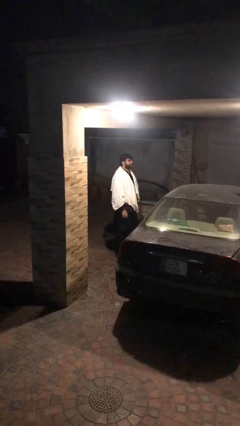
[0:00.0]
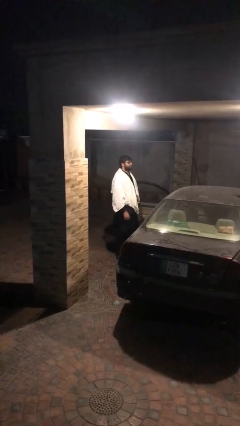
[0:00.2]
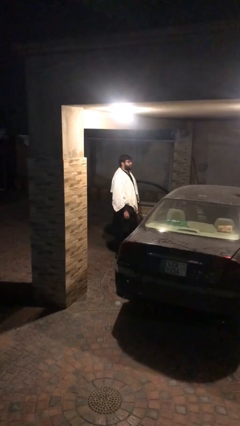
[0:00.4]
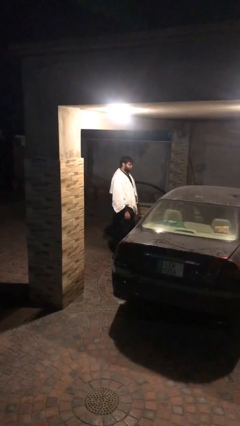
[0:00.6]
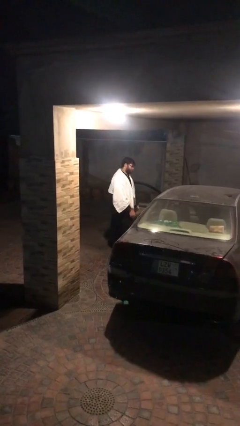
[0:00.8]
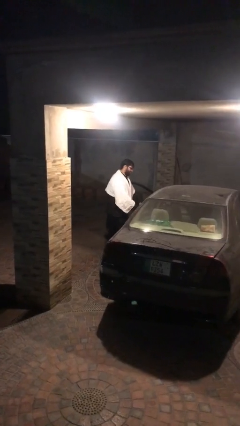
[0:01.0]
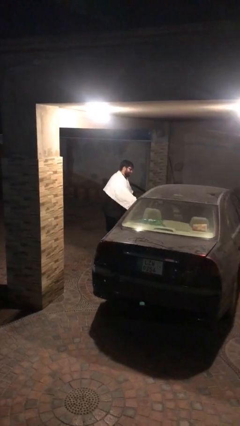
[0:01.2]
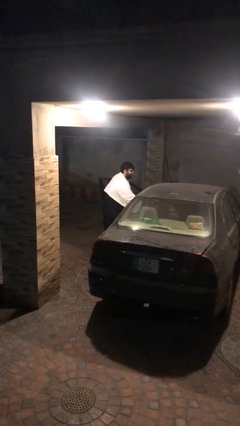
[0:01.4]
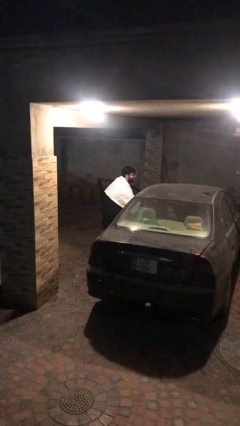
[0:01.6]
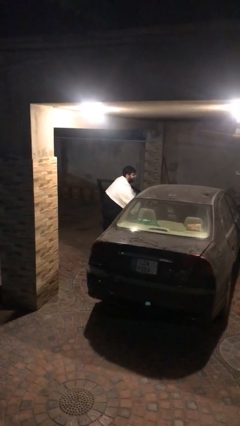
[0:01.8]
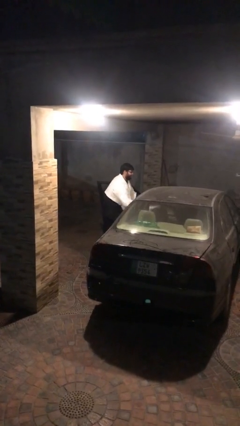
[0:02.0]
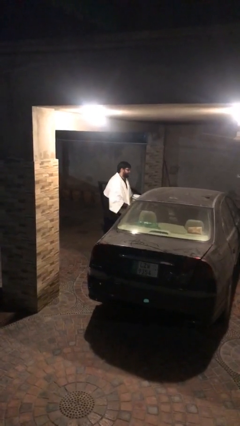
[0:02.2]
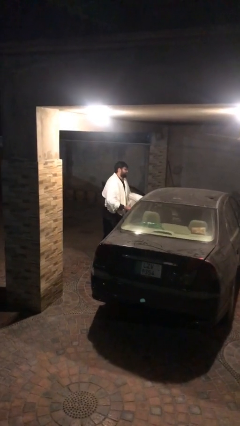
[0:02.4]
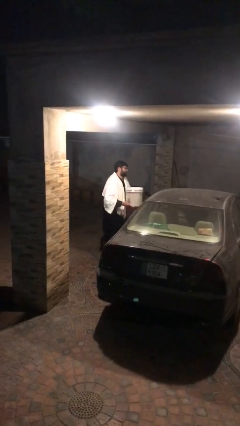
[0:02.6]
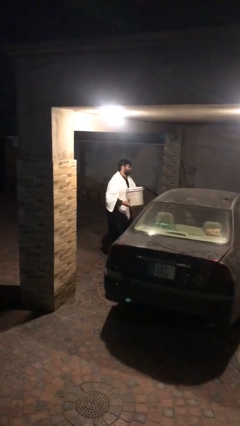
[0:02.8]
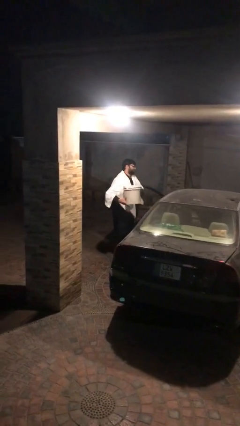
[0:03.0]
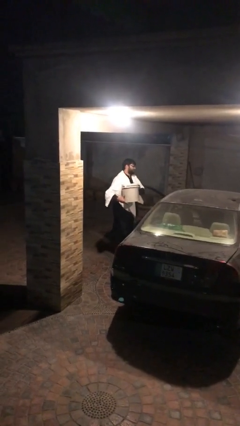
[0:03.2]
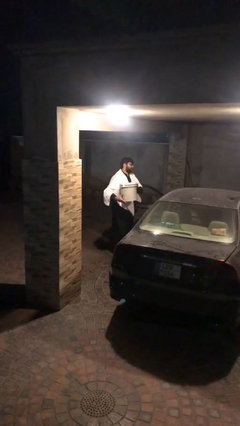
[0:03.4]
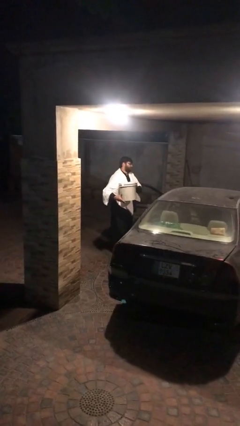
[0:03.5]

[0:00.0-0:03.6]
person unloads car

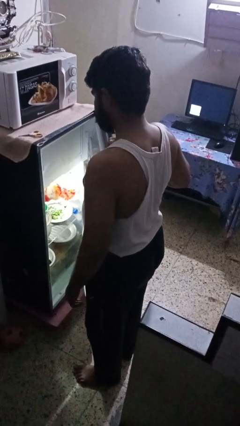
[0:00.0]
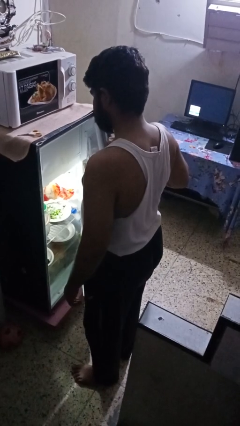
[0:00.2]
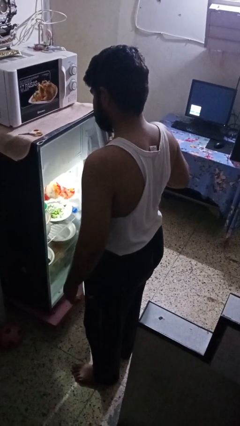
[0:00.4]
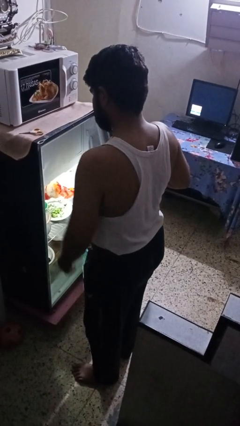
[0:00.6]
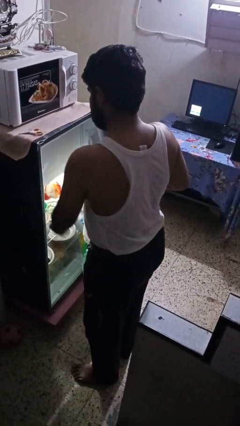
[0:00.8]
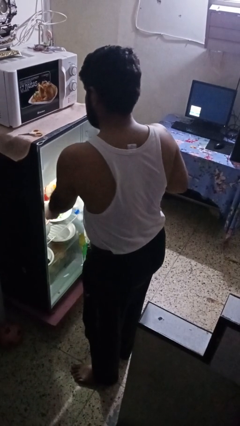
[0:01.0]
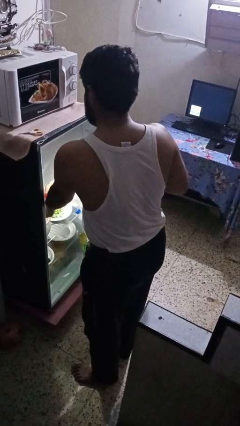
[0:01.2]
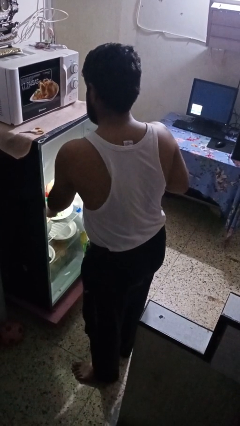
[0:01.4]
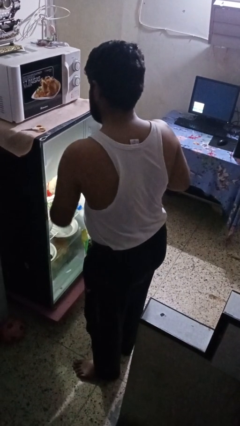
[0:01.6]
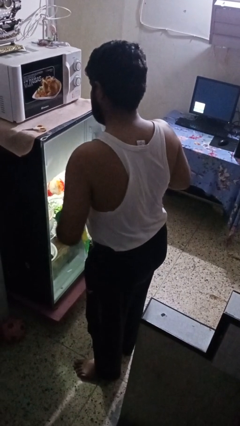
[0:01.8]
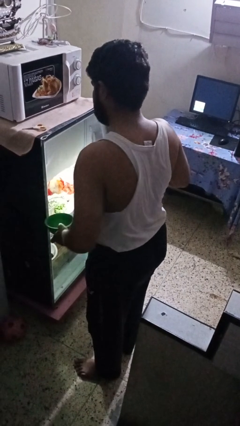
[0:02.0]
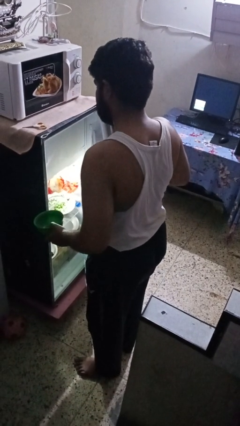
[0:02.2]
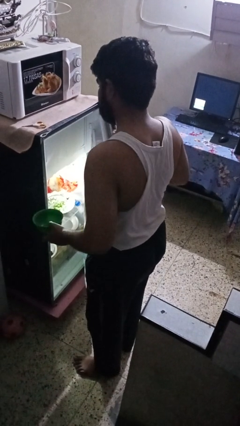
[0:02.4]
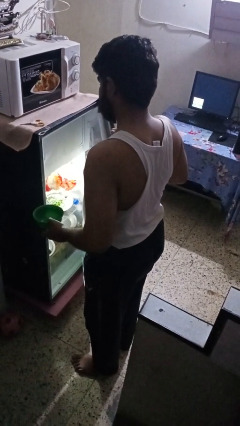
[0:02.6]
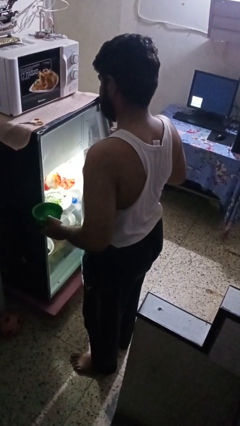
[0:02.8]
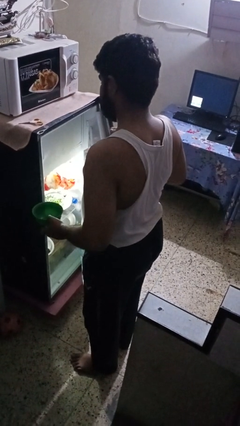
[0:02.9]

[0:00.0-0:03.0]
person takes object from refrigerator

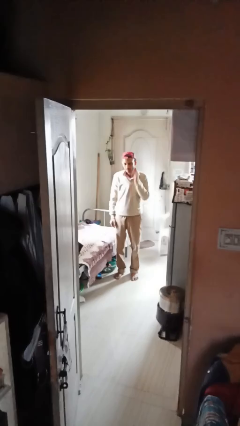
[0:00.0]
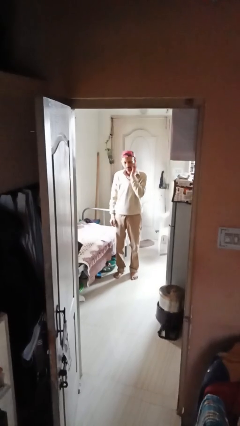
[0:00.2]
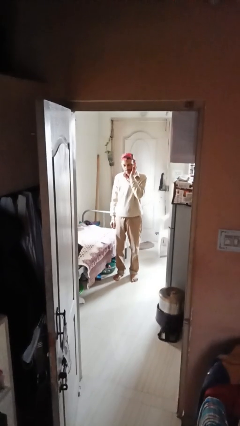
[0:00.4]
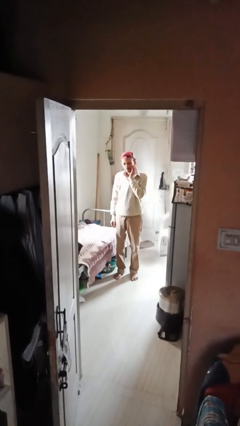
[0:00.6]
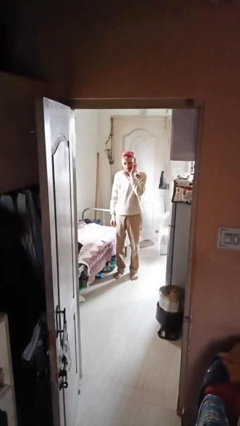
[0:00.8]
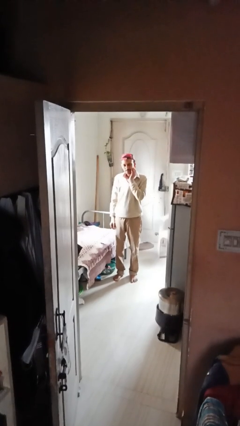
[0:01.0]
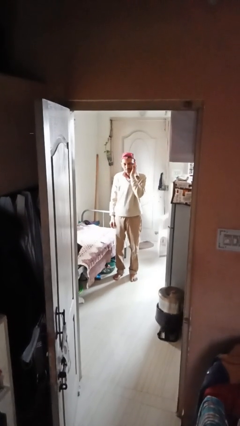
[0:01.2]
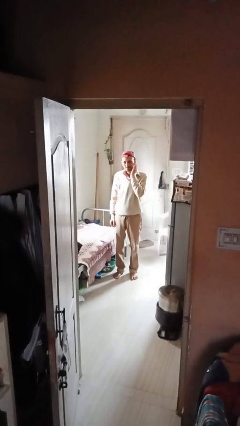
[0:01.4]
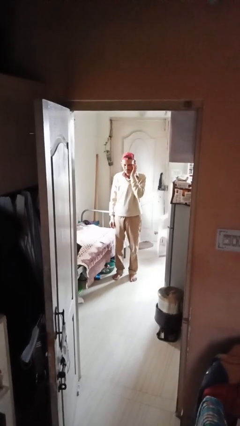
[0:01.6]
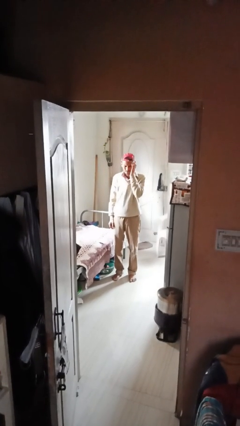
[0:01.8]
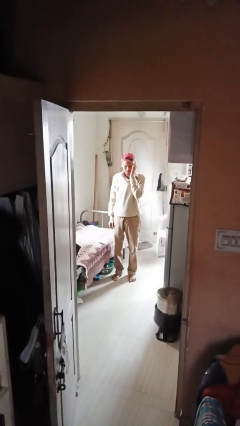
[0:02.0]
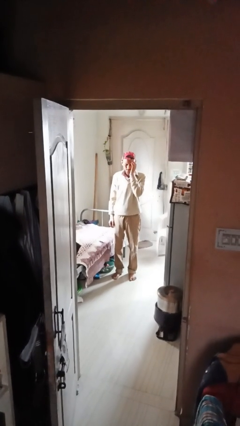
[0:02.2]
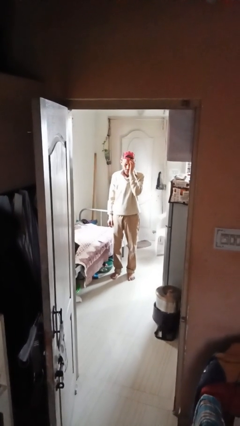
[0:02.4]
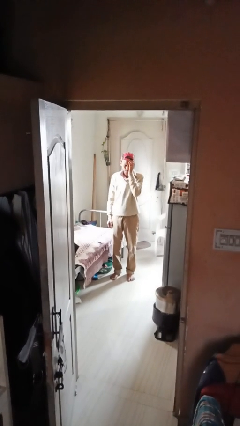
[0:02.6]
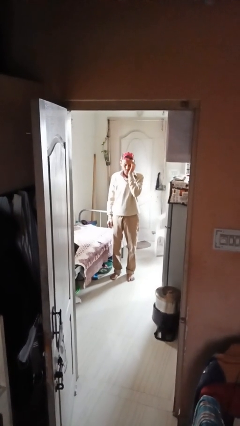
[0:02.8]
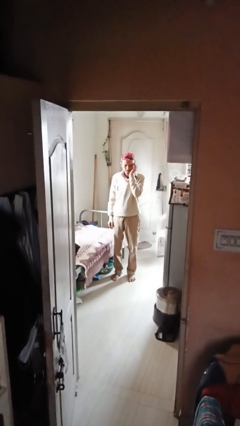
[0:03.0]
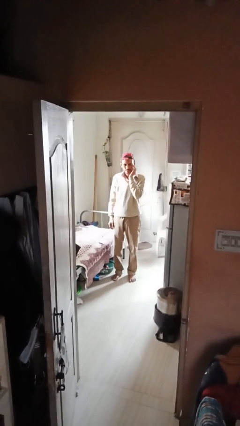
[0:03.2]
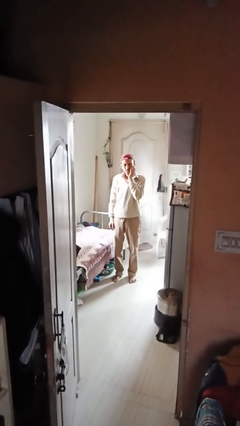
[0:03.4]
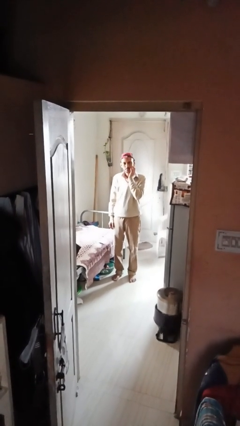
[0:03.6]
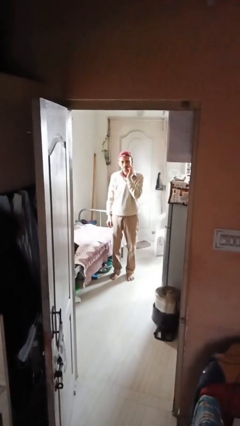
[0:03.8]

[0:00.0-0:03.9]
person scratches face

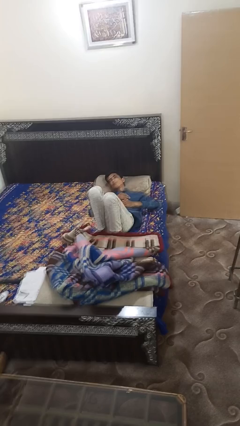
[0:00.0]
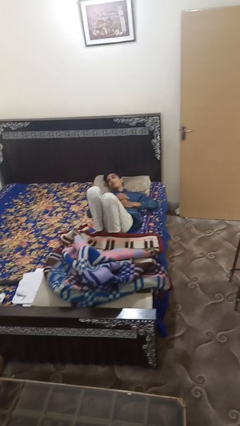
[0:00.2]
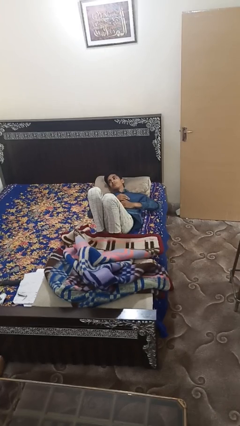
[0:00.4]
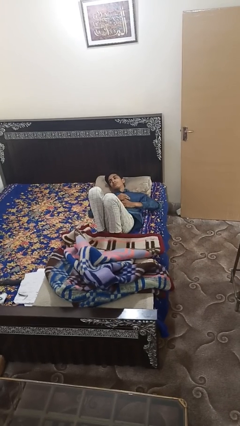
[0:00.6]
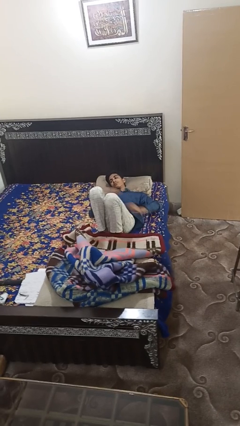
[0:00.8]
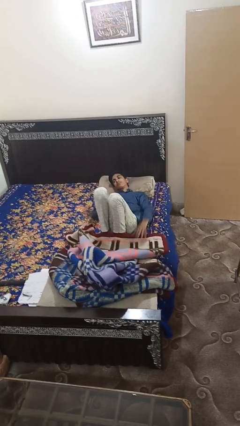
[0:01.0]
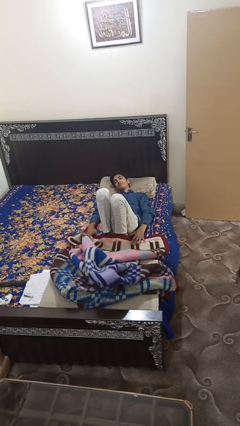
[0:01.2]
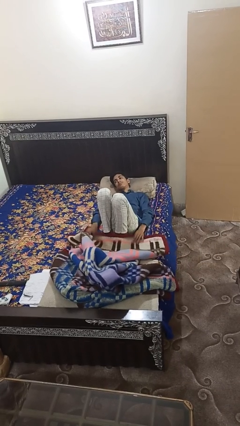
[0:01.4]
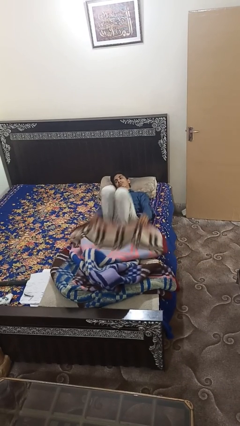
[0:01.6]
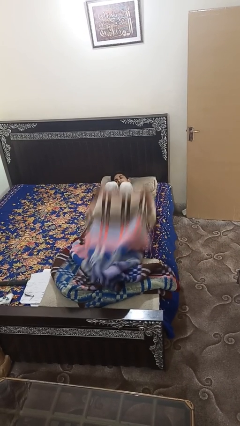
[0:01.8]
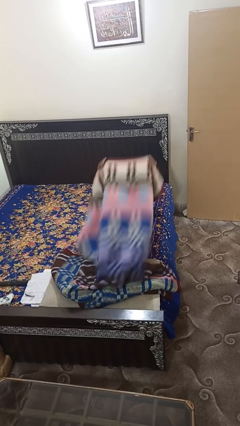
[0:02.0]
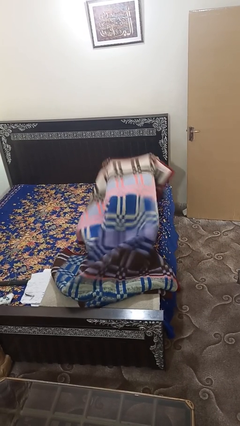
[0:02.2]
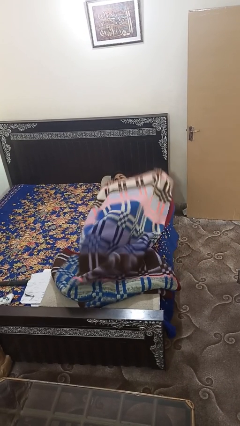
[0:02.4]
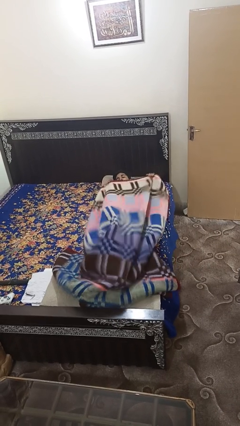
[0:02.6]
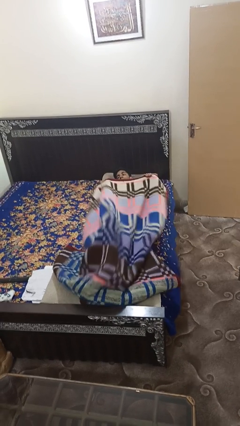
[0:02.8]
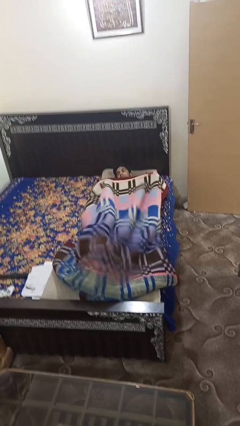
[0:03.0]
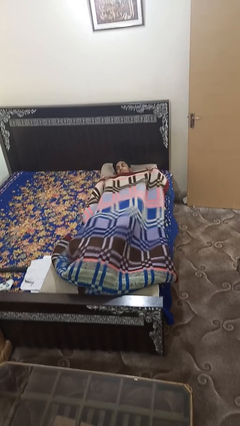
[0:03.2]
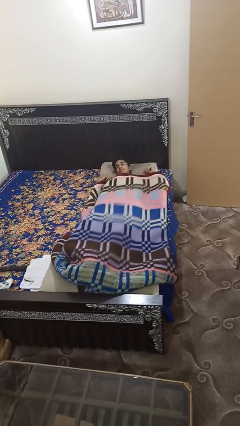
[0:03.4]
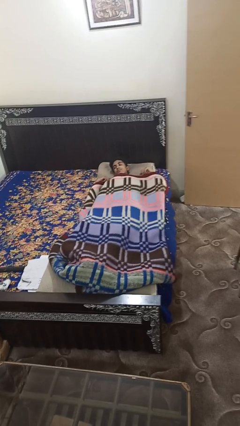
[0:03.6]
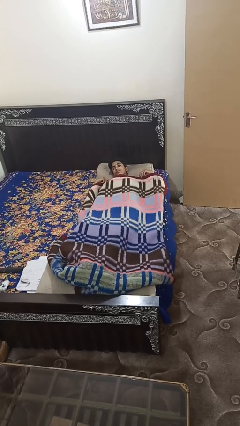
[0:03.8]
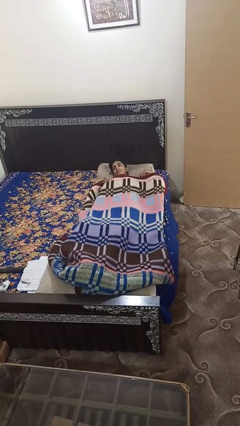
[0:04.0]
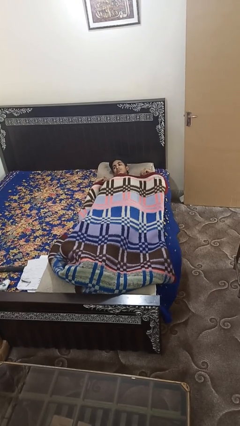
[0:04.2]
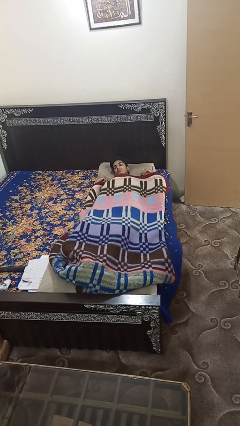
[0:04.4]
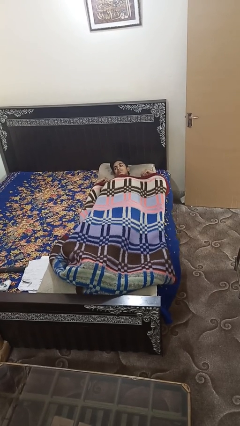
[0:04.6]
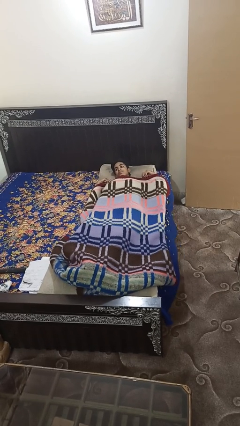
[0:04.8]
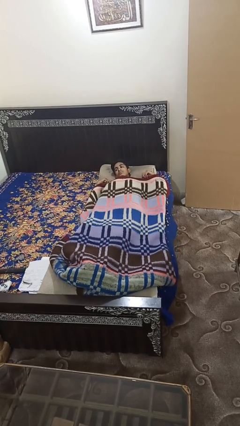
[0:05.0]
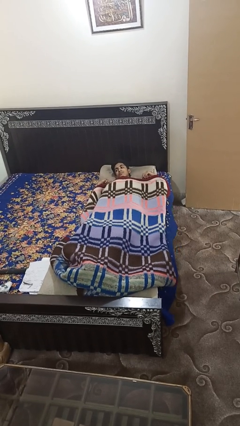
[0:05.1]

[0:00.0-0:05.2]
person covers with bedsheets

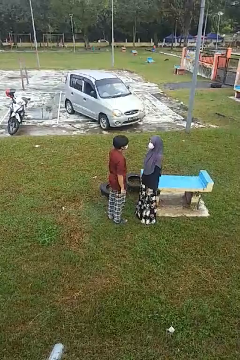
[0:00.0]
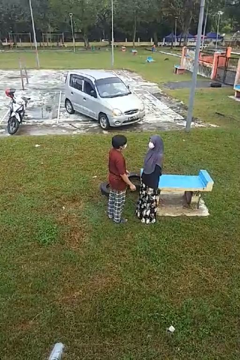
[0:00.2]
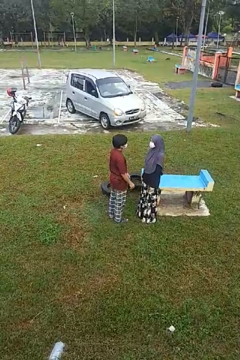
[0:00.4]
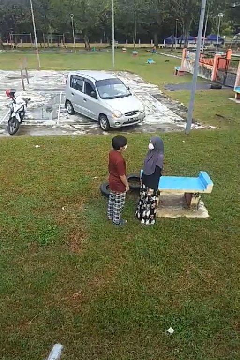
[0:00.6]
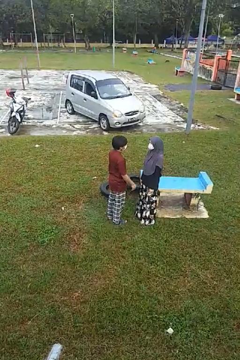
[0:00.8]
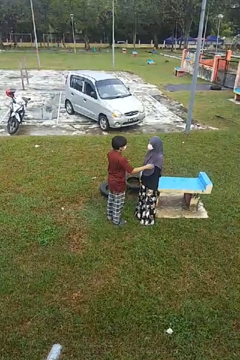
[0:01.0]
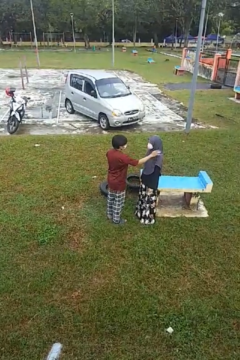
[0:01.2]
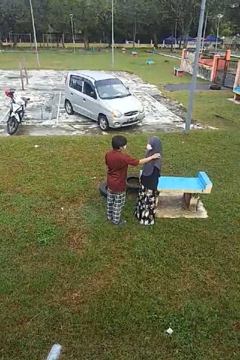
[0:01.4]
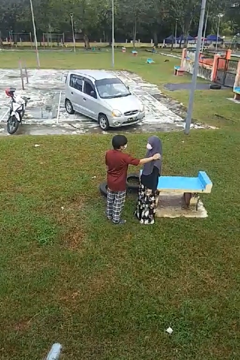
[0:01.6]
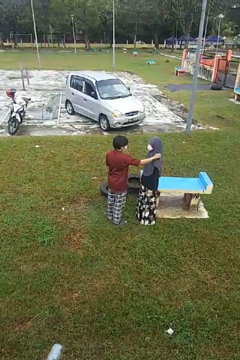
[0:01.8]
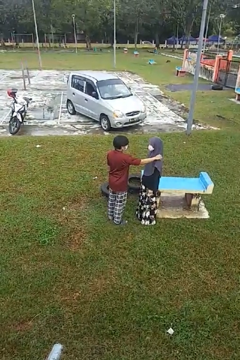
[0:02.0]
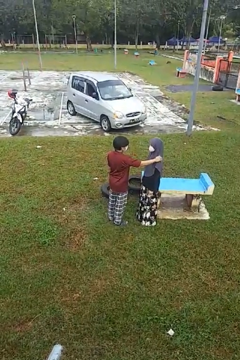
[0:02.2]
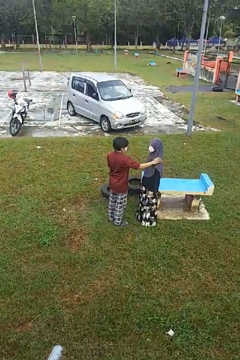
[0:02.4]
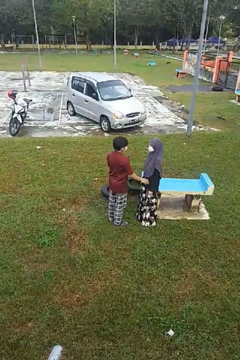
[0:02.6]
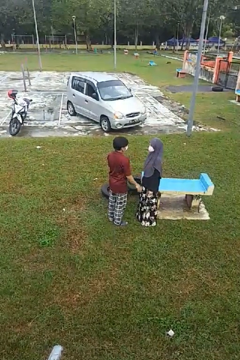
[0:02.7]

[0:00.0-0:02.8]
person pounds shoulders of person
